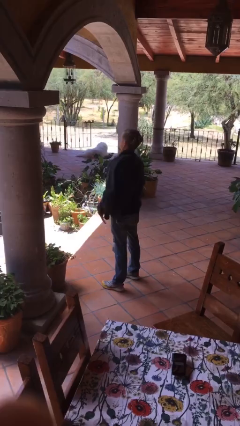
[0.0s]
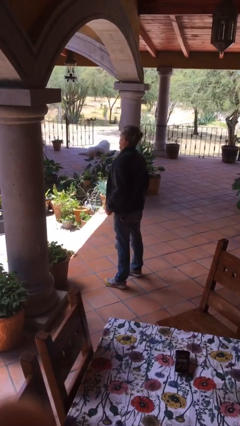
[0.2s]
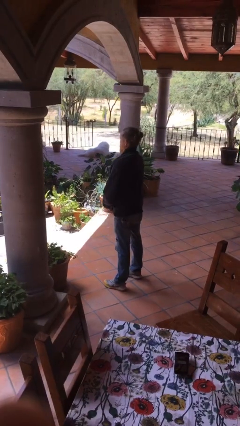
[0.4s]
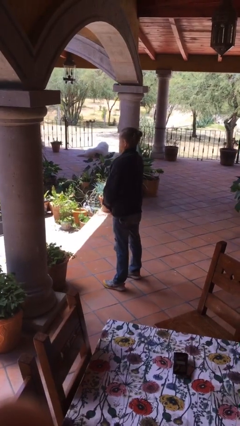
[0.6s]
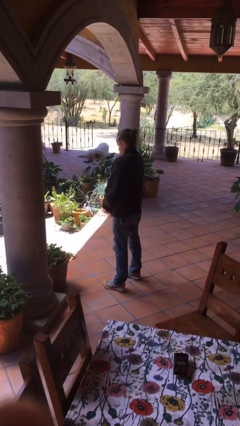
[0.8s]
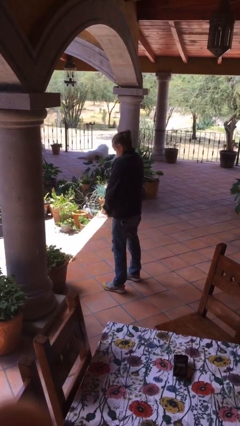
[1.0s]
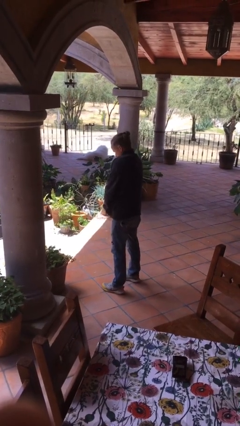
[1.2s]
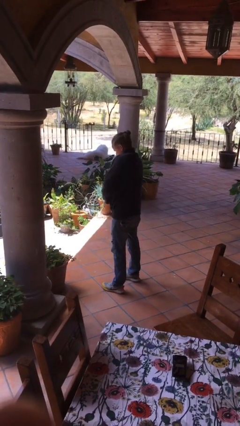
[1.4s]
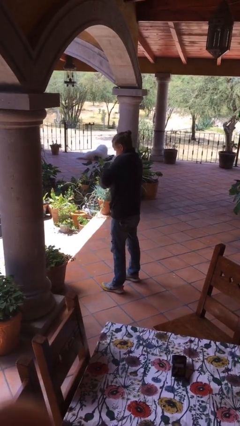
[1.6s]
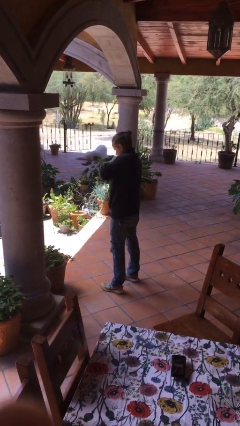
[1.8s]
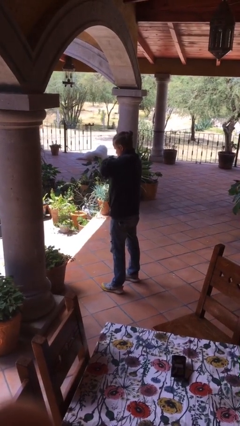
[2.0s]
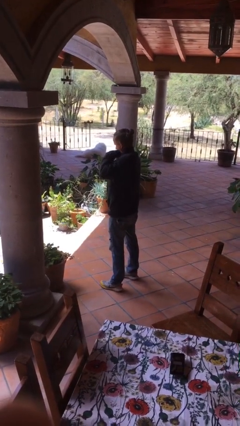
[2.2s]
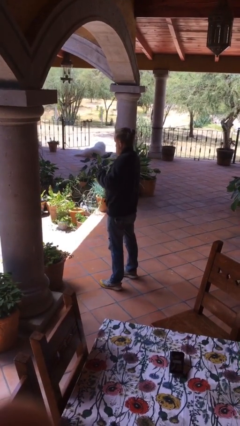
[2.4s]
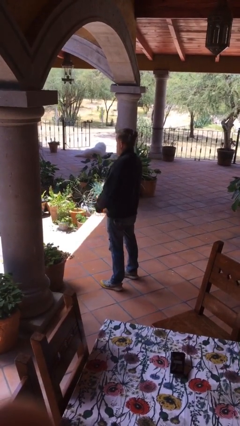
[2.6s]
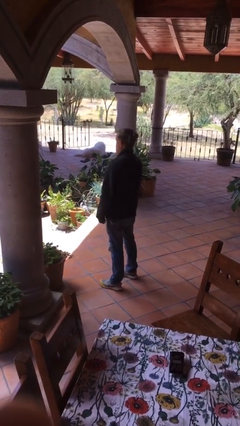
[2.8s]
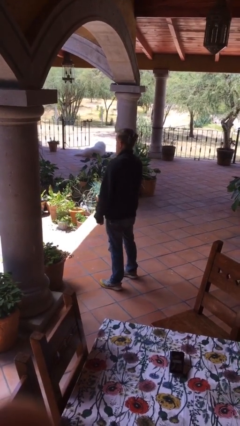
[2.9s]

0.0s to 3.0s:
person zips up jacket

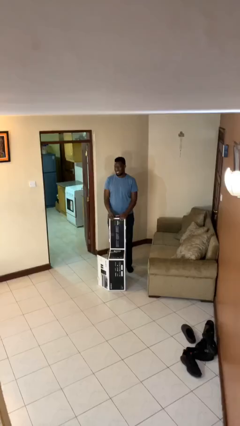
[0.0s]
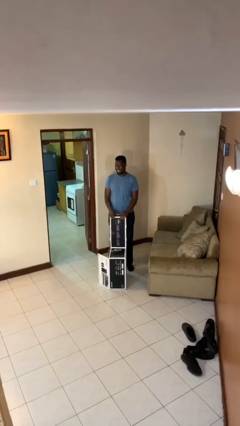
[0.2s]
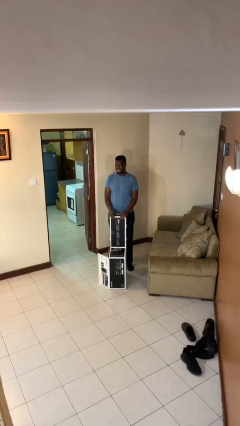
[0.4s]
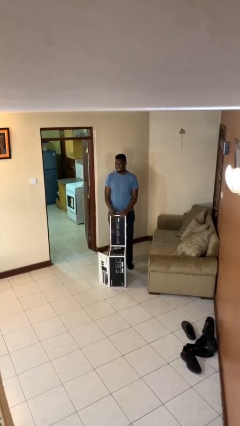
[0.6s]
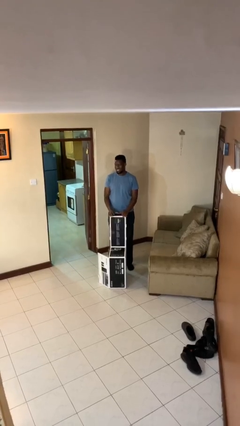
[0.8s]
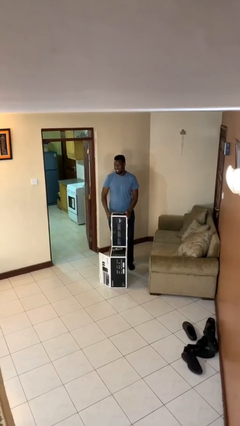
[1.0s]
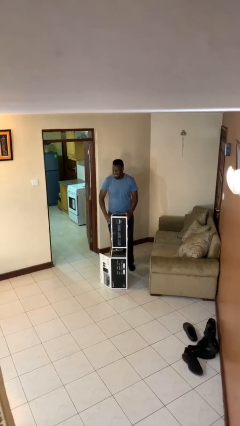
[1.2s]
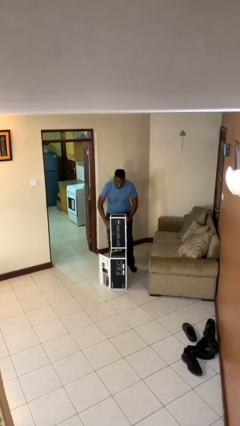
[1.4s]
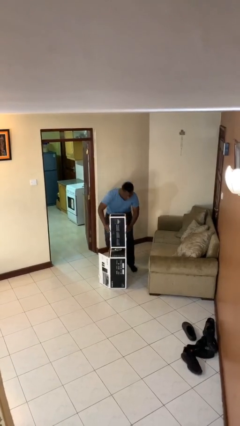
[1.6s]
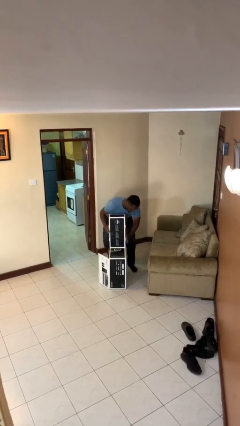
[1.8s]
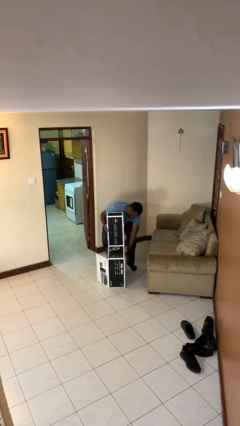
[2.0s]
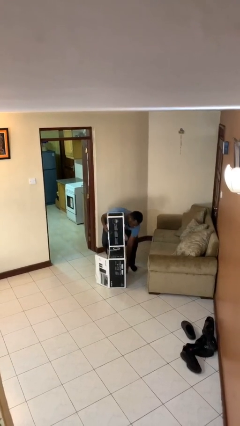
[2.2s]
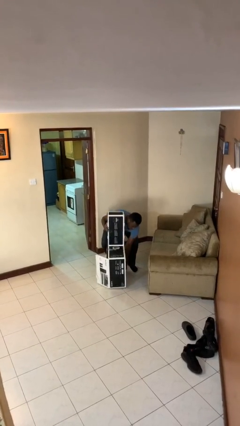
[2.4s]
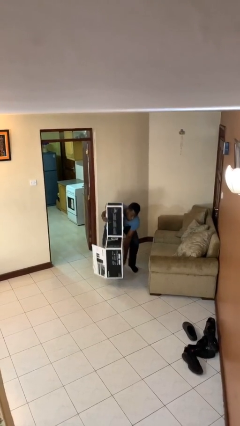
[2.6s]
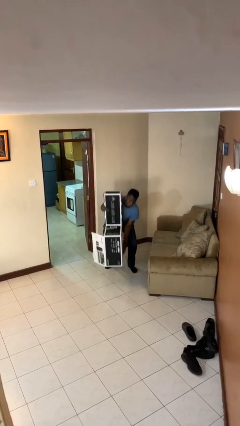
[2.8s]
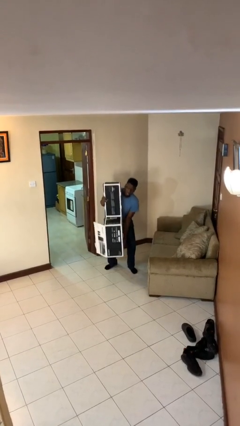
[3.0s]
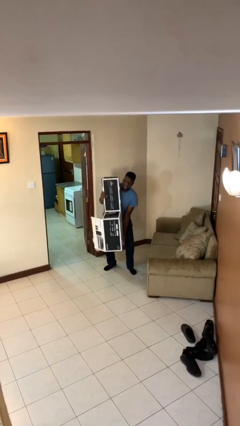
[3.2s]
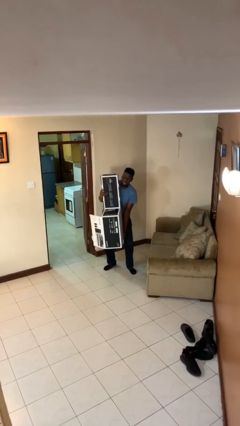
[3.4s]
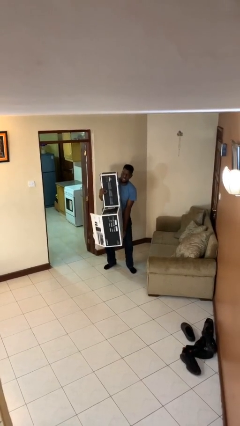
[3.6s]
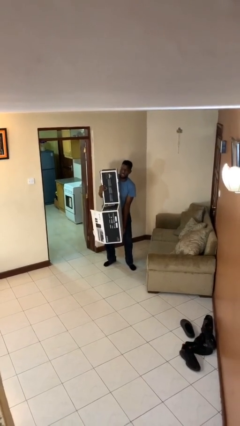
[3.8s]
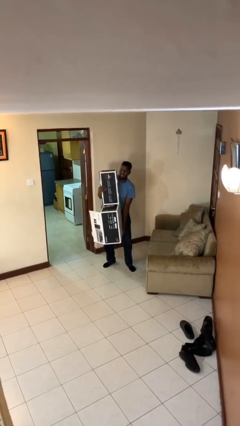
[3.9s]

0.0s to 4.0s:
person picks up object from floor

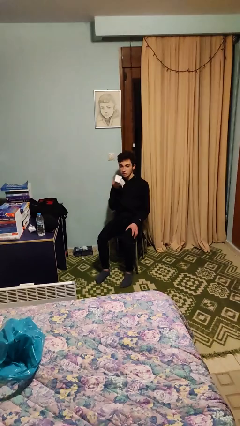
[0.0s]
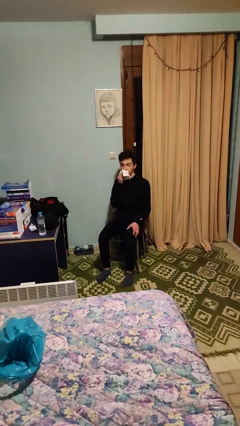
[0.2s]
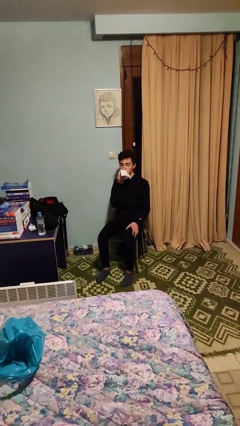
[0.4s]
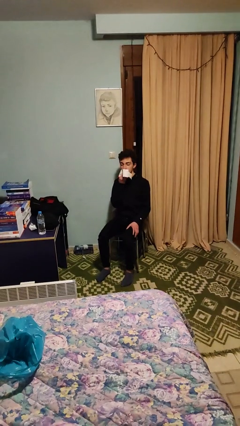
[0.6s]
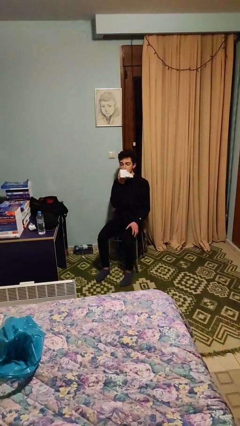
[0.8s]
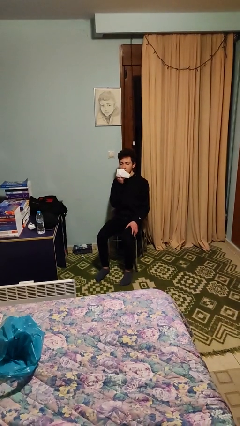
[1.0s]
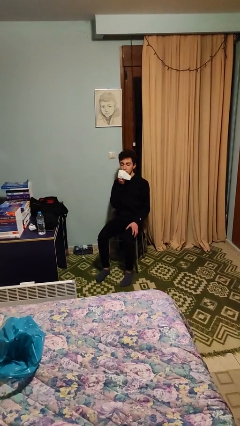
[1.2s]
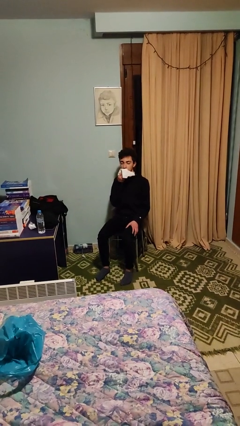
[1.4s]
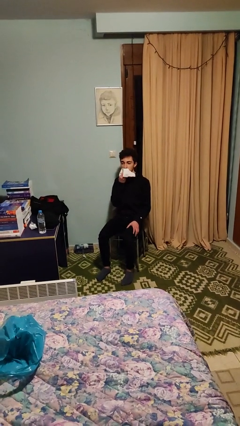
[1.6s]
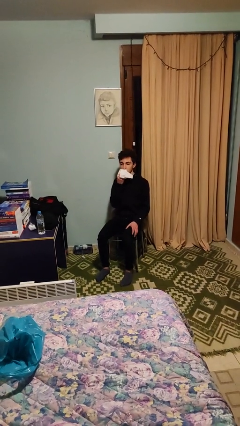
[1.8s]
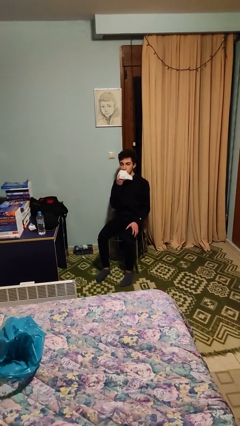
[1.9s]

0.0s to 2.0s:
person wipes mouth with napkin

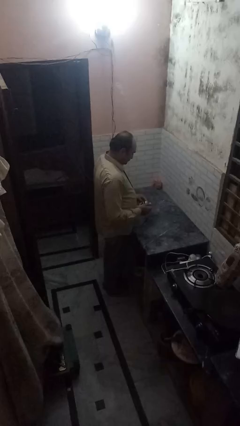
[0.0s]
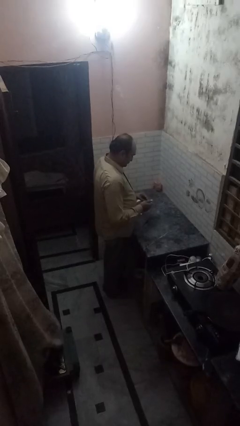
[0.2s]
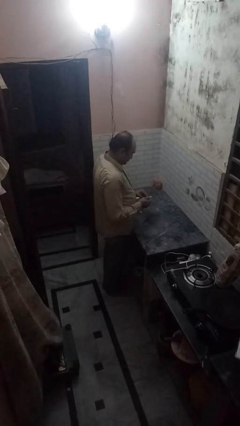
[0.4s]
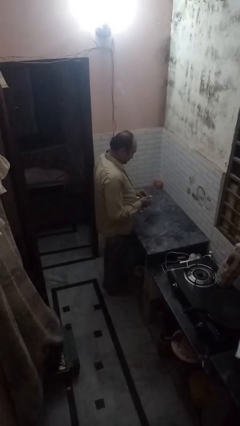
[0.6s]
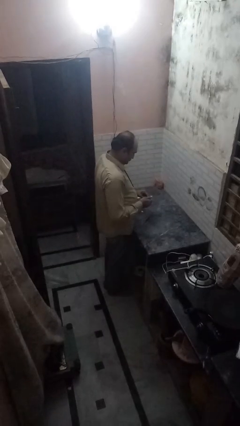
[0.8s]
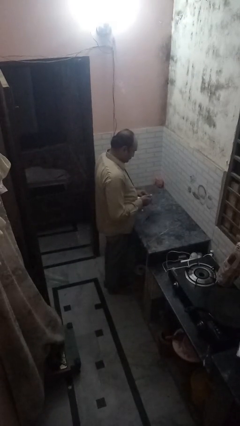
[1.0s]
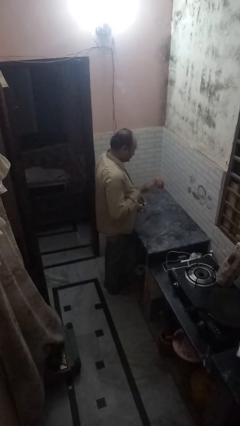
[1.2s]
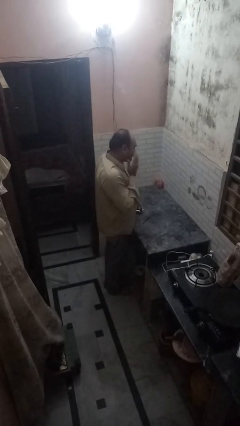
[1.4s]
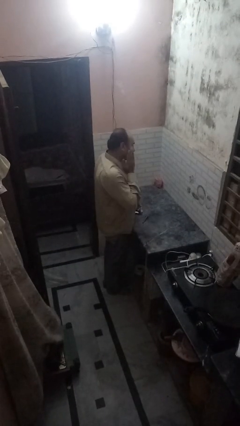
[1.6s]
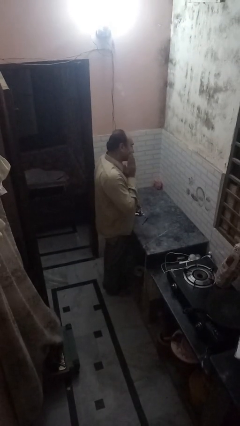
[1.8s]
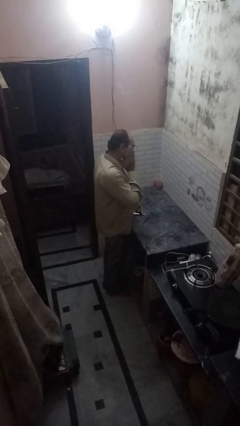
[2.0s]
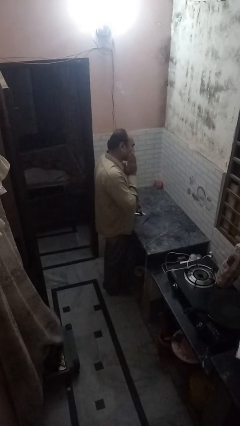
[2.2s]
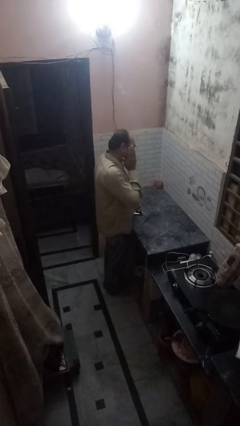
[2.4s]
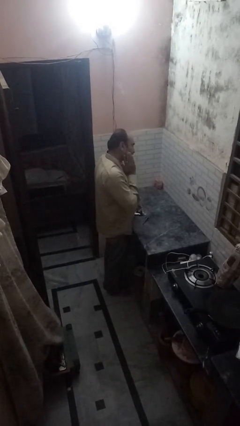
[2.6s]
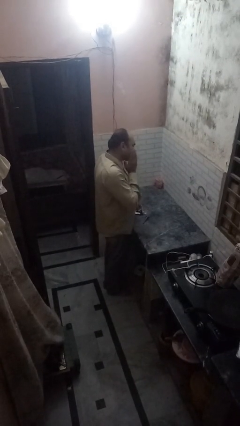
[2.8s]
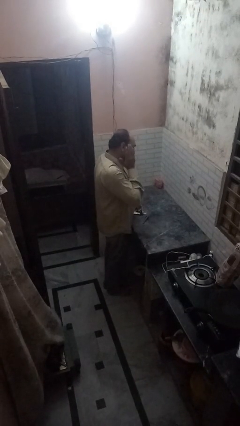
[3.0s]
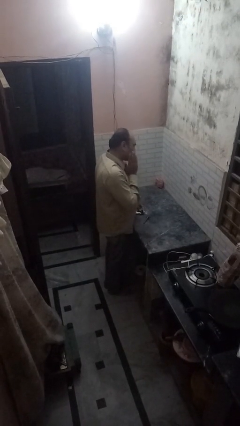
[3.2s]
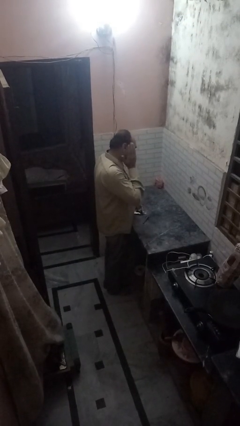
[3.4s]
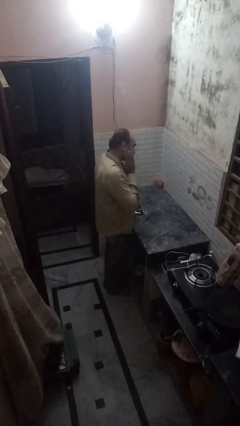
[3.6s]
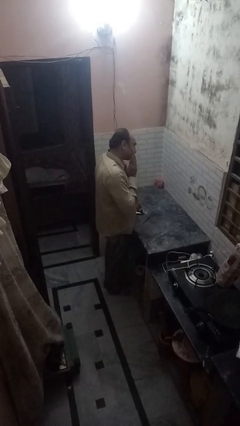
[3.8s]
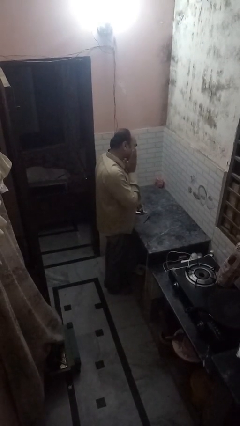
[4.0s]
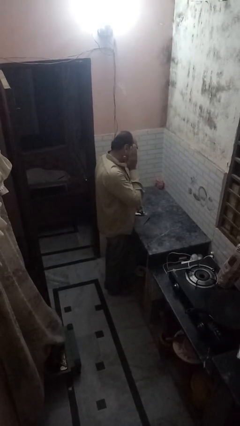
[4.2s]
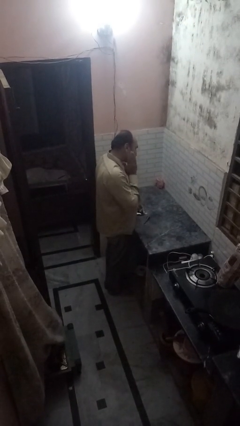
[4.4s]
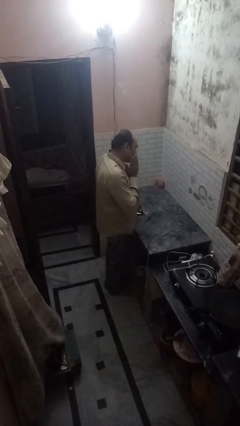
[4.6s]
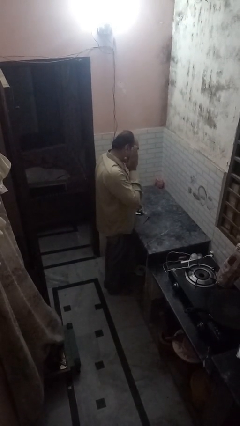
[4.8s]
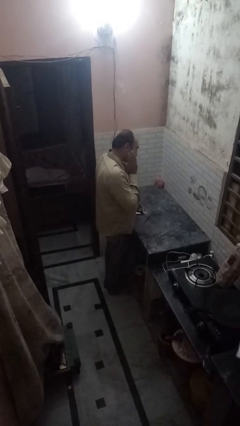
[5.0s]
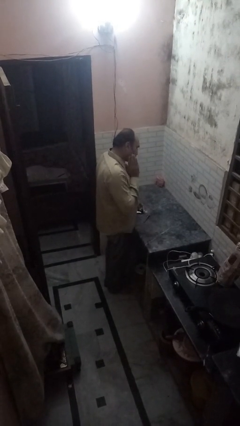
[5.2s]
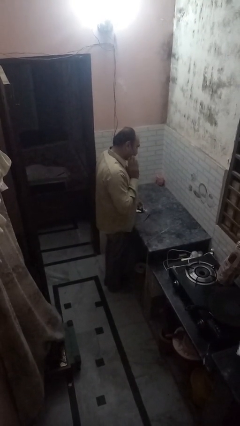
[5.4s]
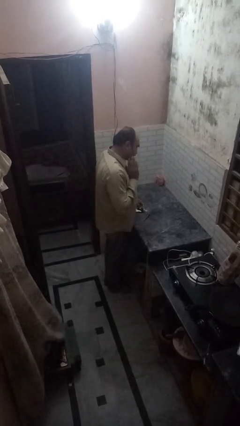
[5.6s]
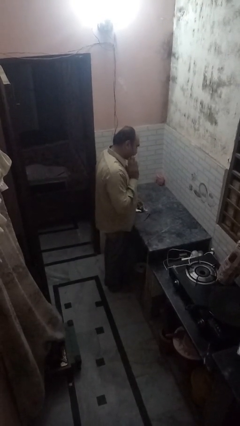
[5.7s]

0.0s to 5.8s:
person applies shaving cream

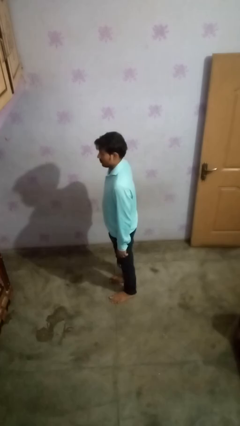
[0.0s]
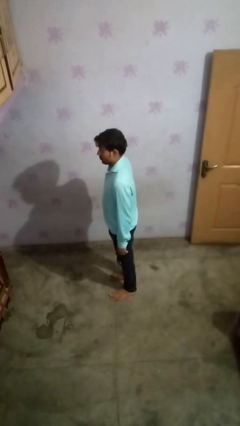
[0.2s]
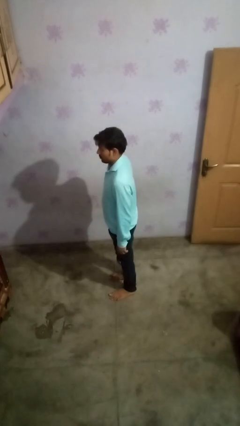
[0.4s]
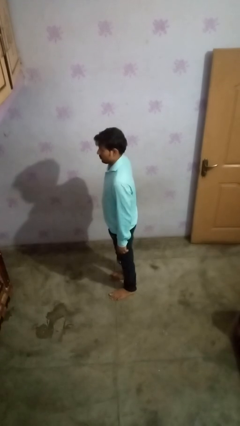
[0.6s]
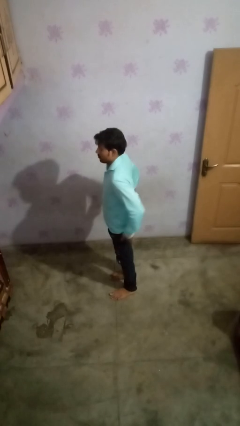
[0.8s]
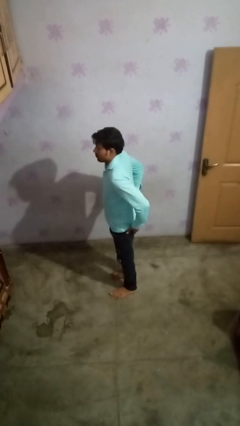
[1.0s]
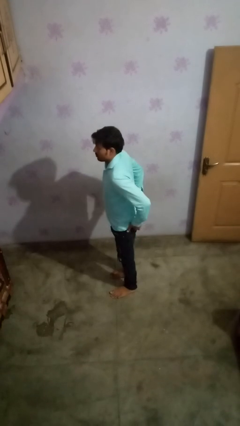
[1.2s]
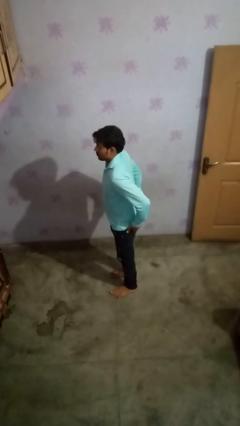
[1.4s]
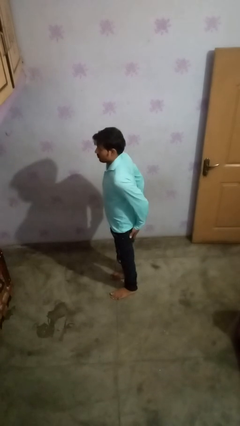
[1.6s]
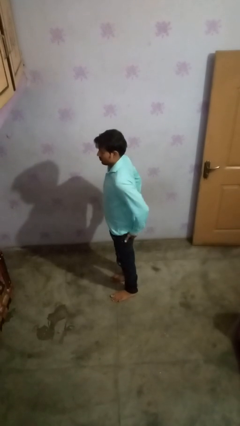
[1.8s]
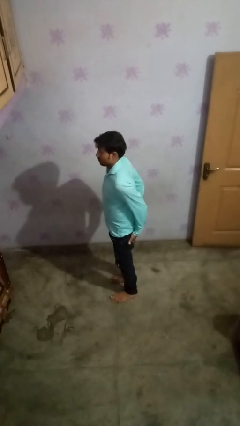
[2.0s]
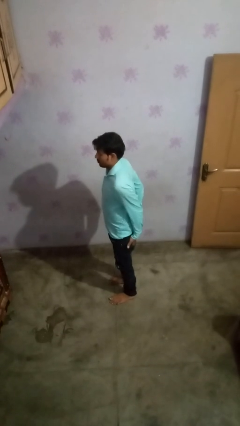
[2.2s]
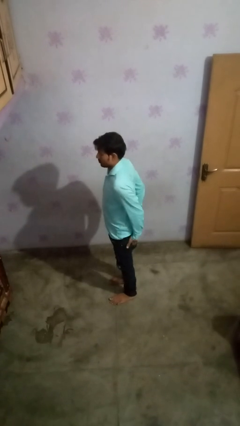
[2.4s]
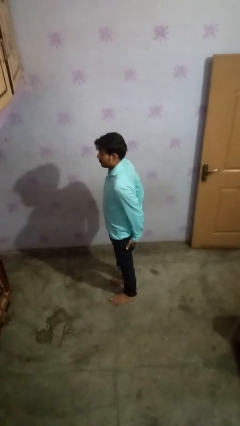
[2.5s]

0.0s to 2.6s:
person puts hands in back pockets
